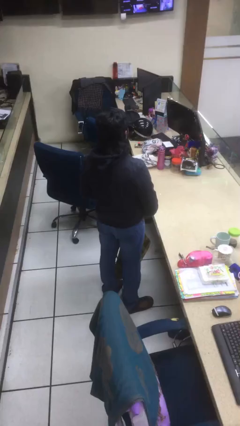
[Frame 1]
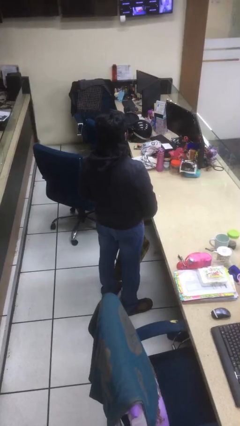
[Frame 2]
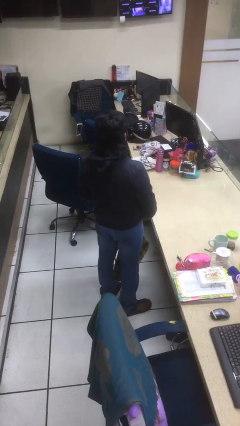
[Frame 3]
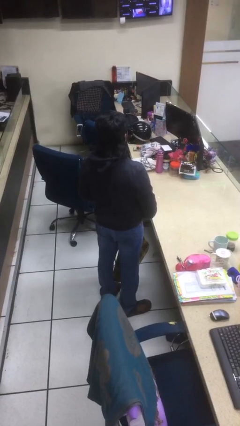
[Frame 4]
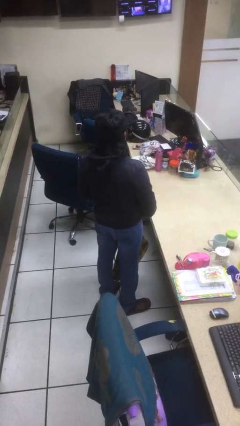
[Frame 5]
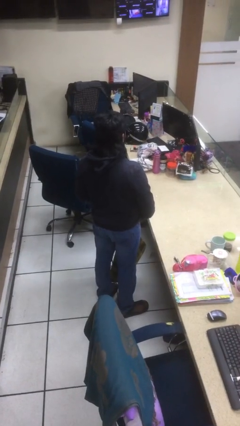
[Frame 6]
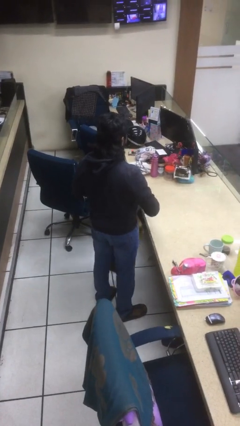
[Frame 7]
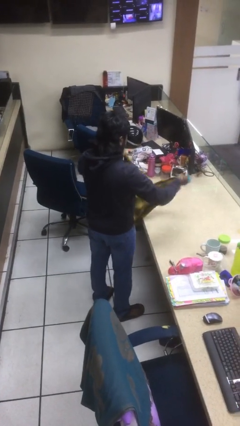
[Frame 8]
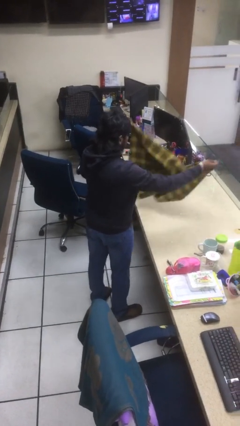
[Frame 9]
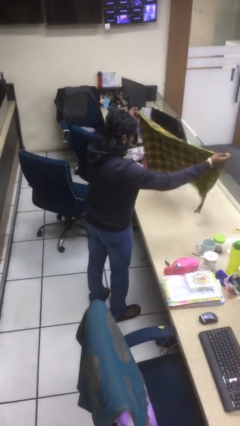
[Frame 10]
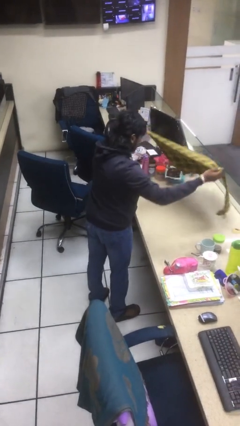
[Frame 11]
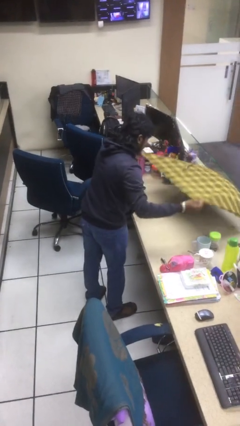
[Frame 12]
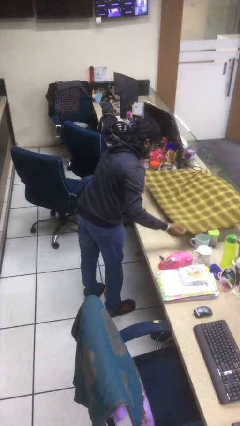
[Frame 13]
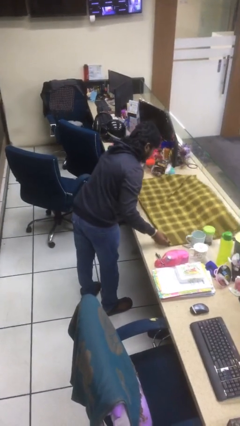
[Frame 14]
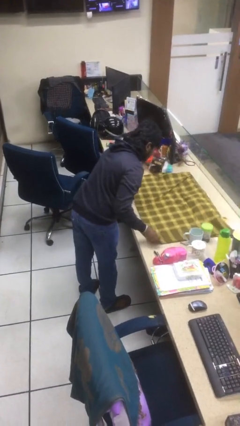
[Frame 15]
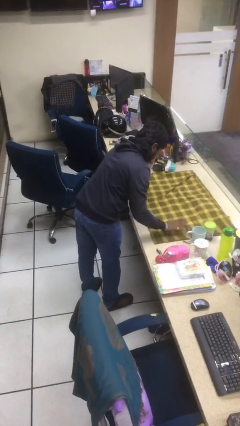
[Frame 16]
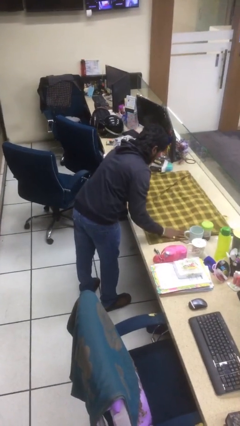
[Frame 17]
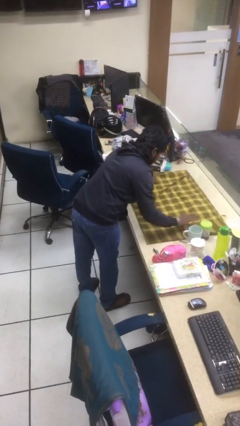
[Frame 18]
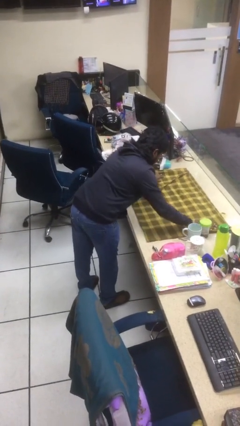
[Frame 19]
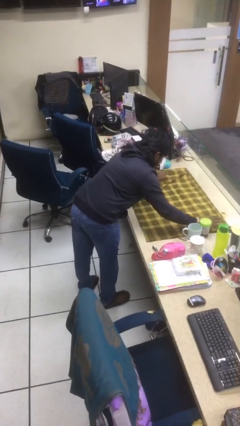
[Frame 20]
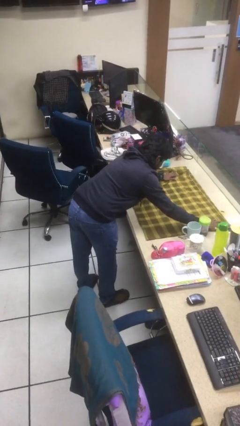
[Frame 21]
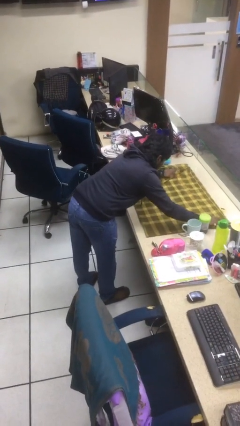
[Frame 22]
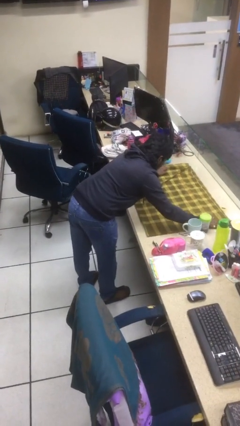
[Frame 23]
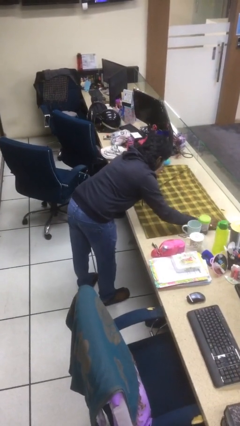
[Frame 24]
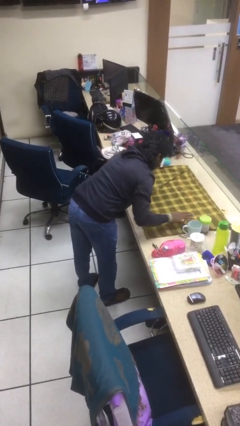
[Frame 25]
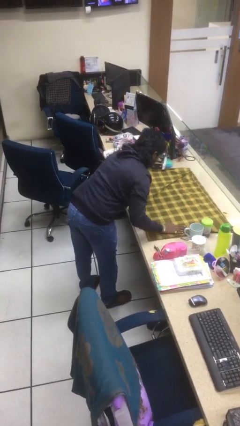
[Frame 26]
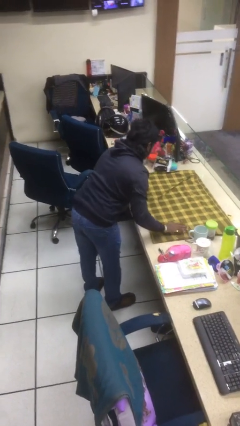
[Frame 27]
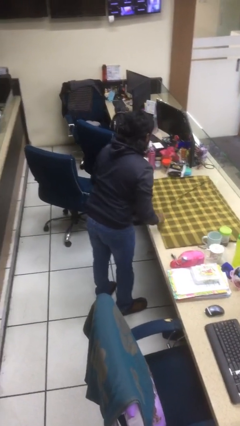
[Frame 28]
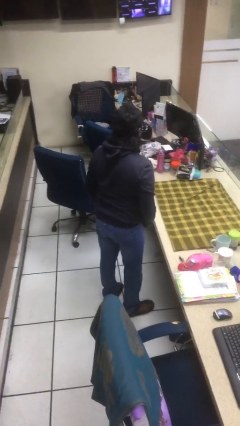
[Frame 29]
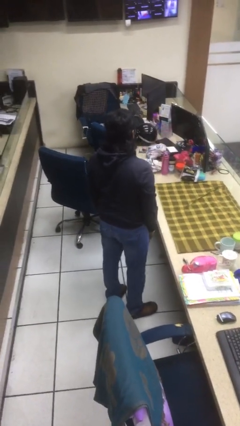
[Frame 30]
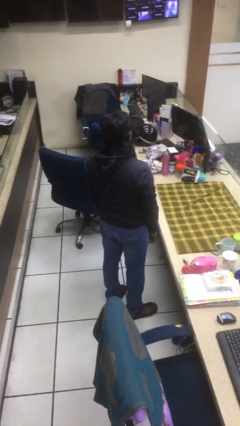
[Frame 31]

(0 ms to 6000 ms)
person spreads tablecloth

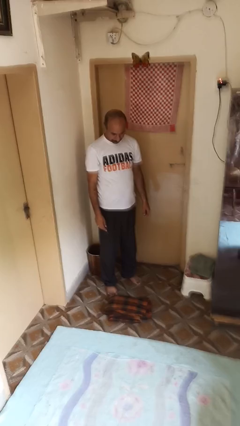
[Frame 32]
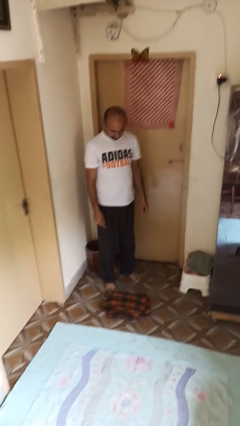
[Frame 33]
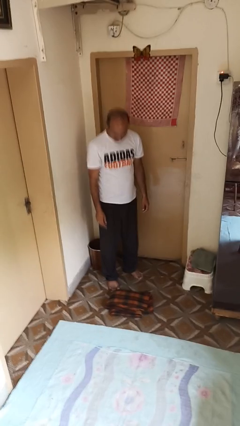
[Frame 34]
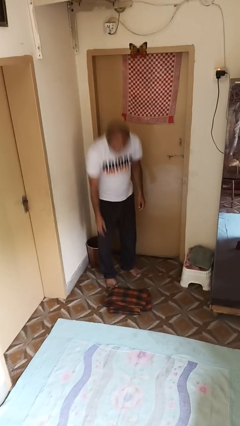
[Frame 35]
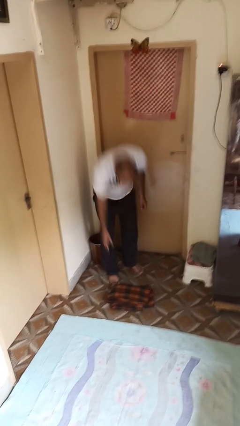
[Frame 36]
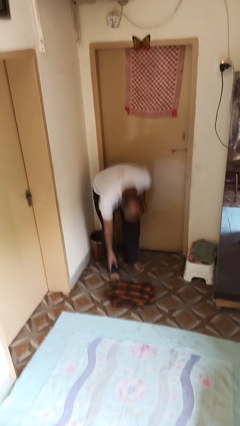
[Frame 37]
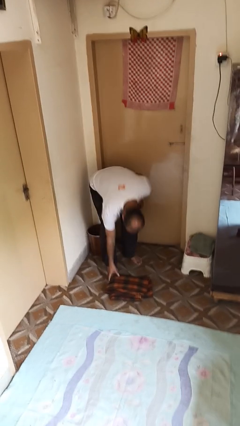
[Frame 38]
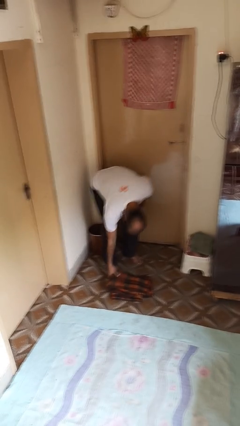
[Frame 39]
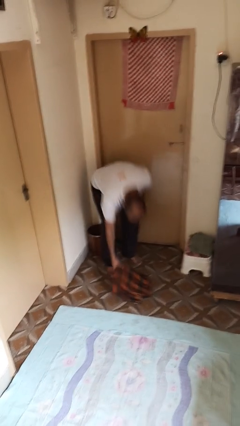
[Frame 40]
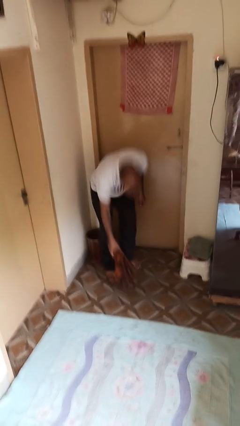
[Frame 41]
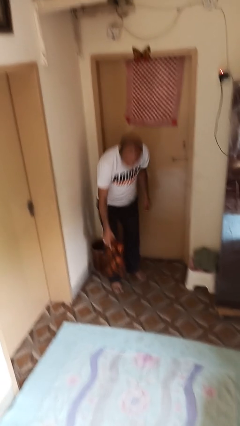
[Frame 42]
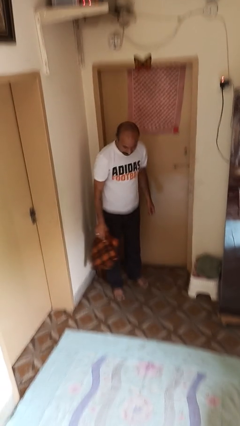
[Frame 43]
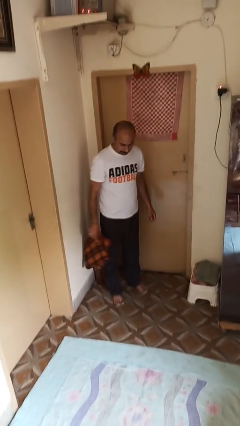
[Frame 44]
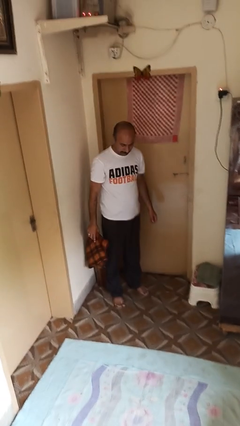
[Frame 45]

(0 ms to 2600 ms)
person picks up object from couch

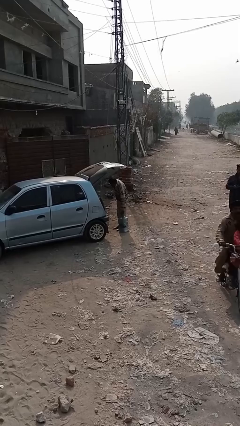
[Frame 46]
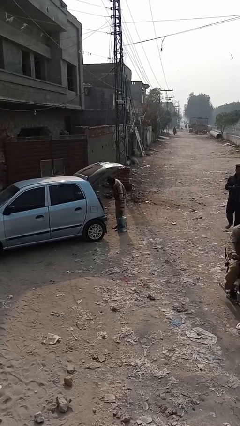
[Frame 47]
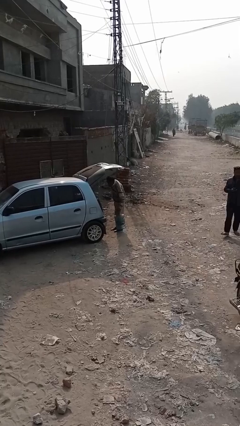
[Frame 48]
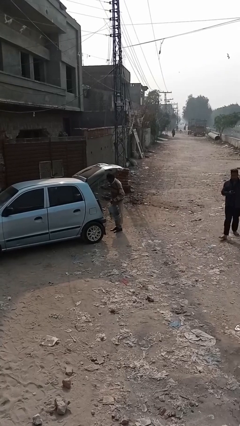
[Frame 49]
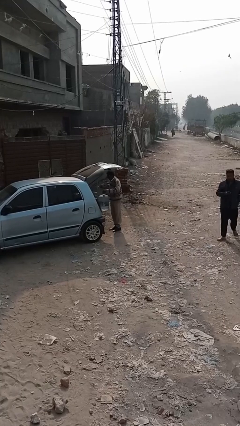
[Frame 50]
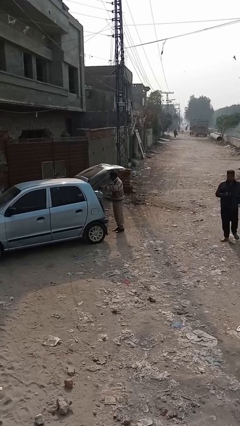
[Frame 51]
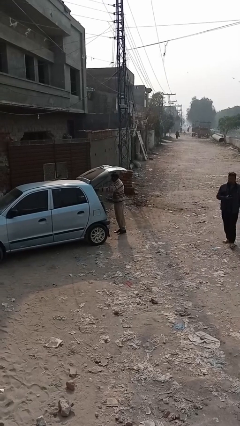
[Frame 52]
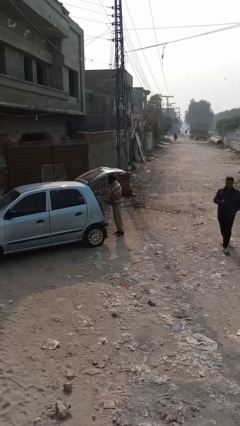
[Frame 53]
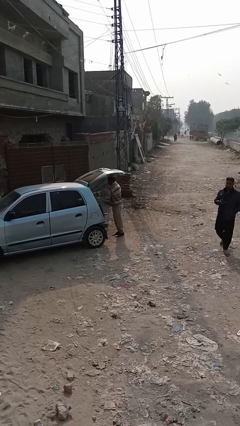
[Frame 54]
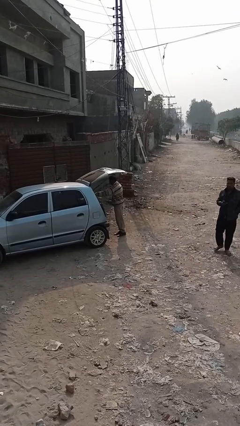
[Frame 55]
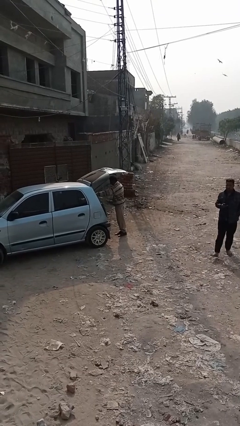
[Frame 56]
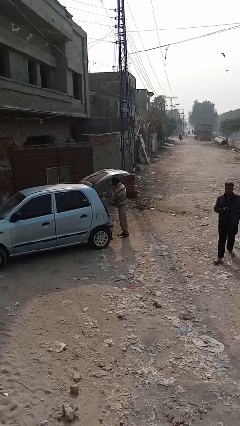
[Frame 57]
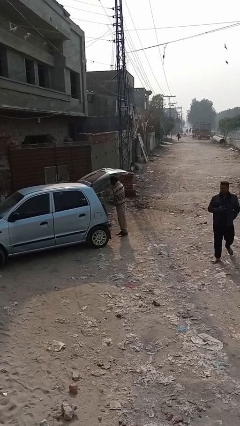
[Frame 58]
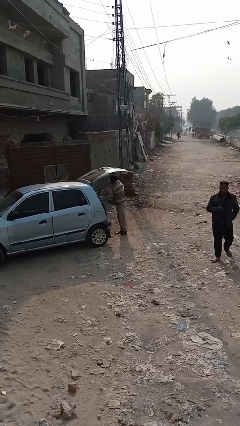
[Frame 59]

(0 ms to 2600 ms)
person loads car

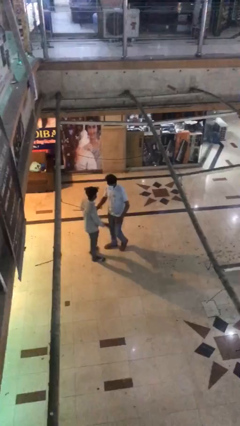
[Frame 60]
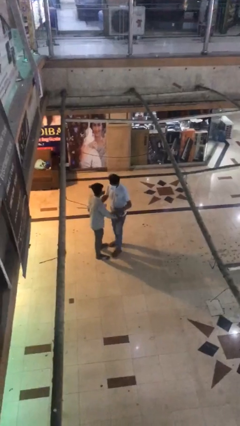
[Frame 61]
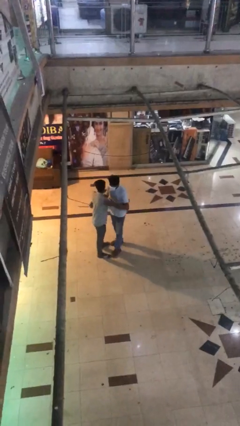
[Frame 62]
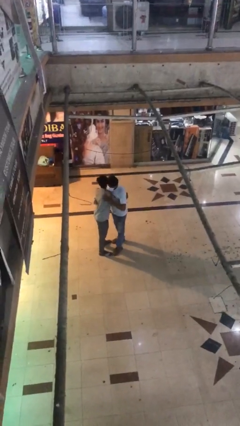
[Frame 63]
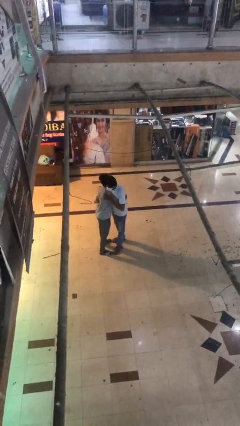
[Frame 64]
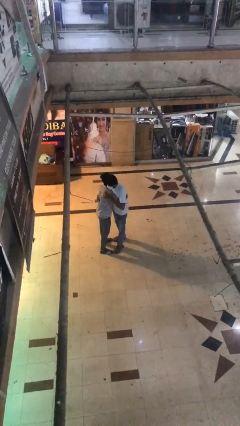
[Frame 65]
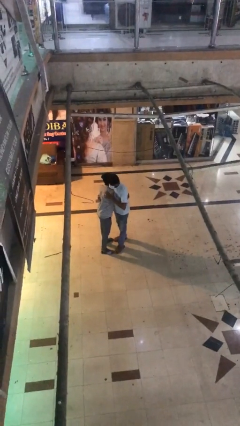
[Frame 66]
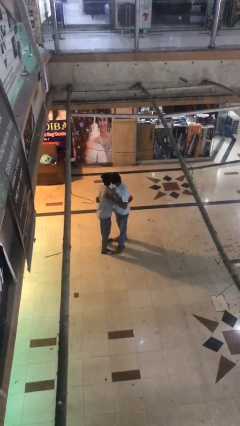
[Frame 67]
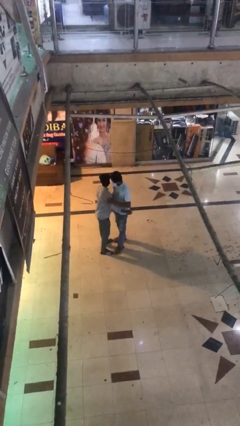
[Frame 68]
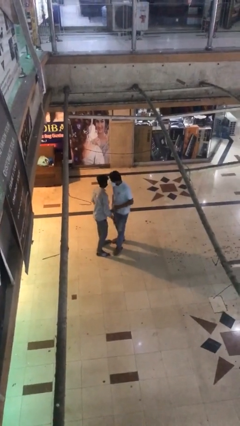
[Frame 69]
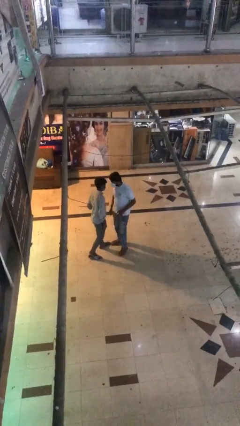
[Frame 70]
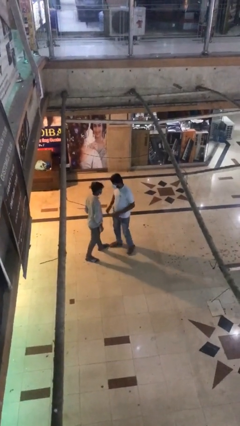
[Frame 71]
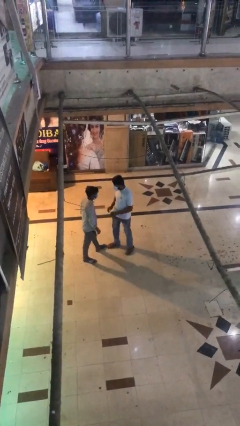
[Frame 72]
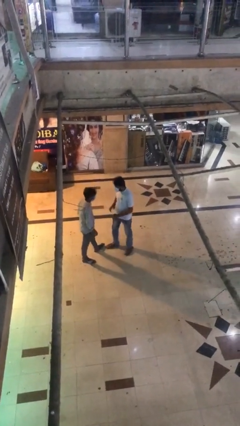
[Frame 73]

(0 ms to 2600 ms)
person embraces person

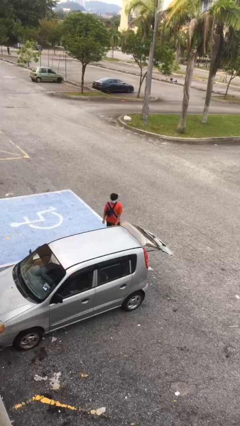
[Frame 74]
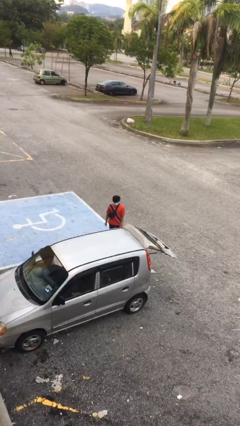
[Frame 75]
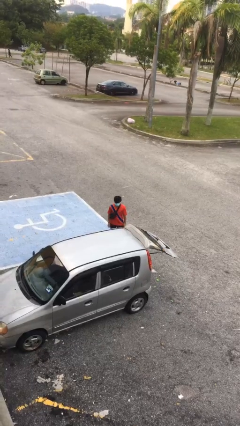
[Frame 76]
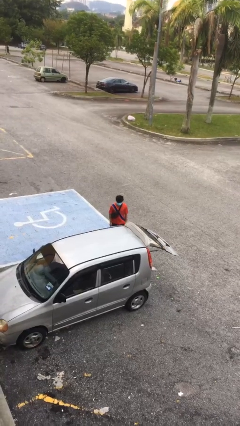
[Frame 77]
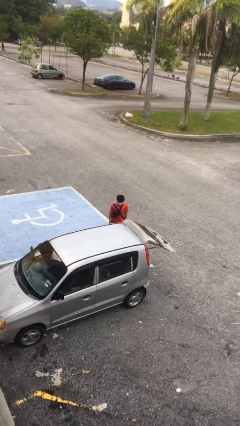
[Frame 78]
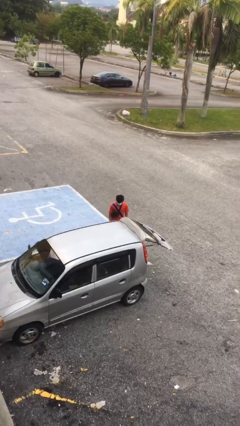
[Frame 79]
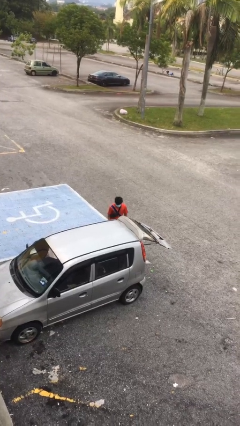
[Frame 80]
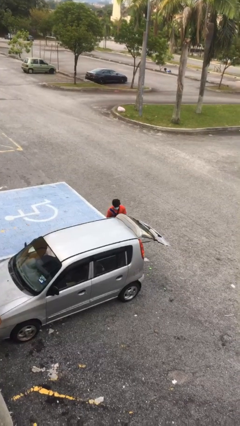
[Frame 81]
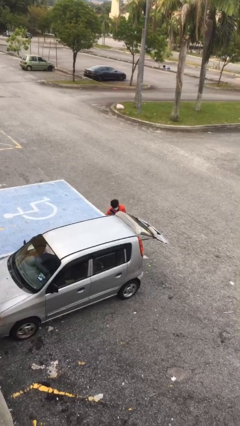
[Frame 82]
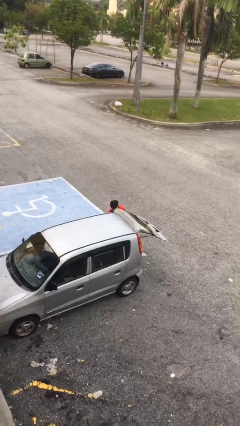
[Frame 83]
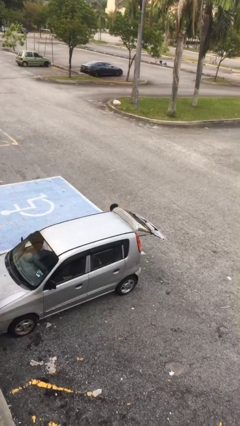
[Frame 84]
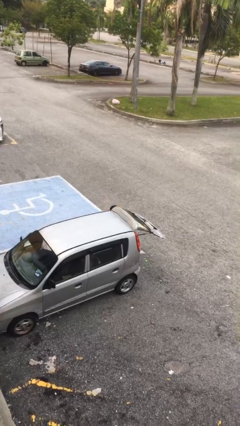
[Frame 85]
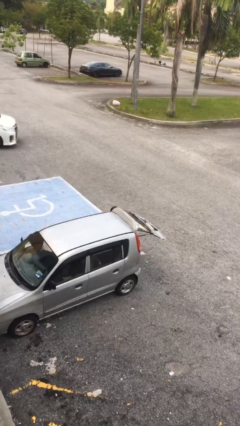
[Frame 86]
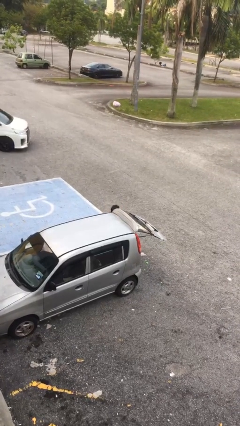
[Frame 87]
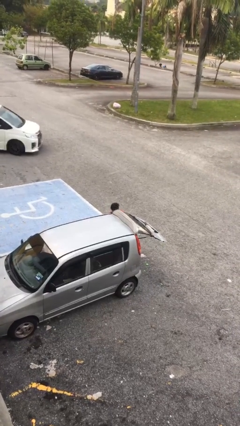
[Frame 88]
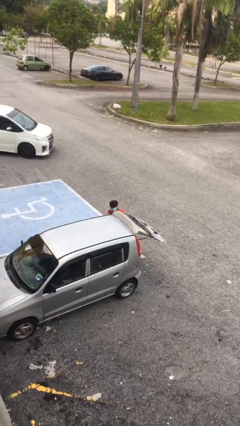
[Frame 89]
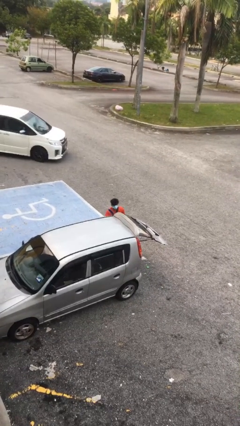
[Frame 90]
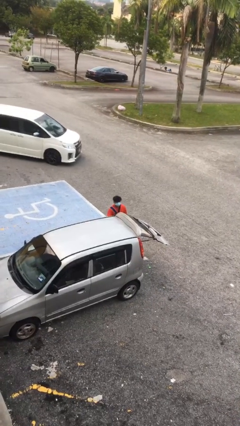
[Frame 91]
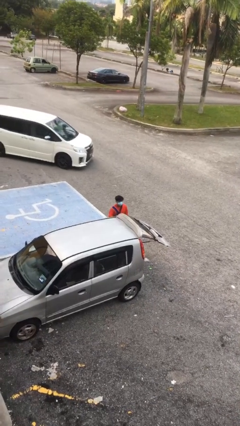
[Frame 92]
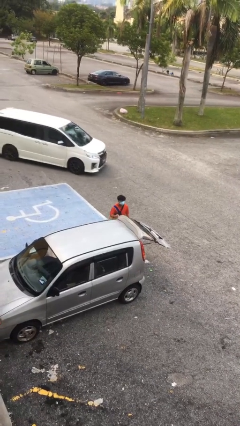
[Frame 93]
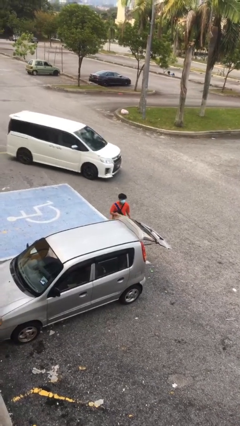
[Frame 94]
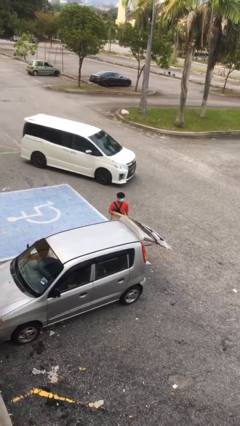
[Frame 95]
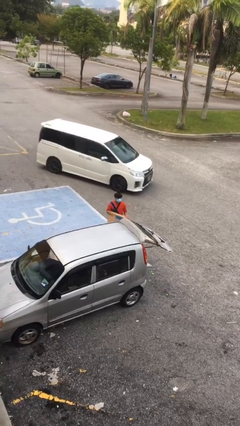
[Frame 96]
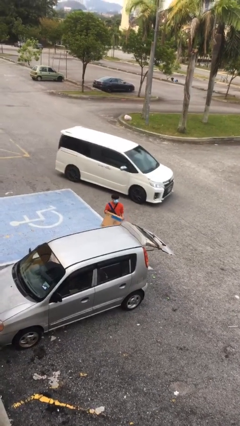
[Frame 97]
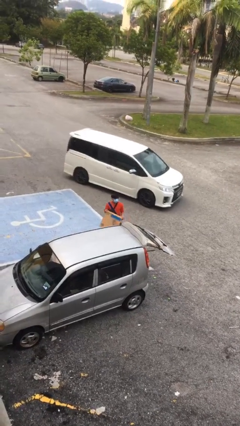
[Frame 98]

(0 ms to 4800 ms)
person unloads car
